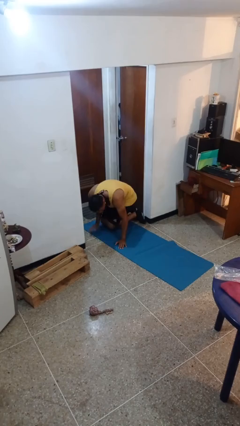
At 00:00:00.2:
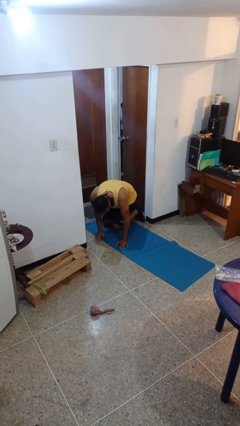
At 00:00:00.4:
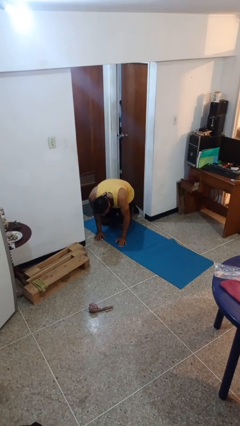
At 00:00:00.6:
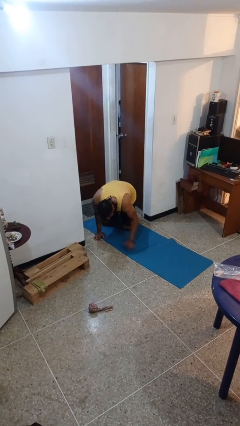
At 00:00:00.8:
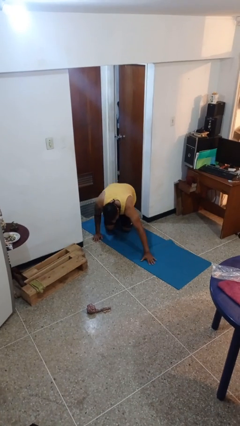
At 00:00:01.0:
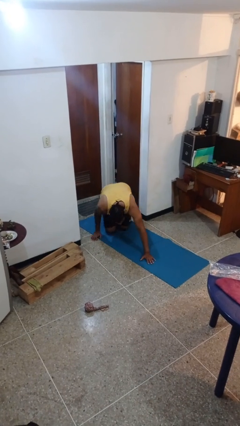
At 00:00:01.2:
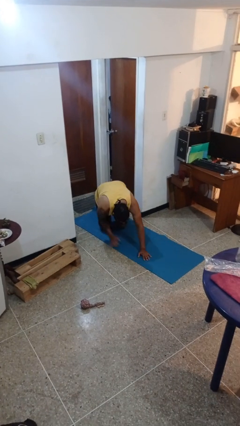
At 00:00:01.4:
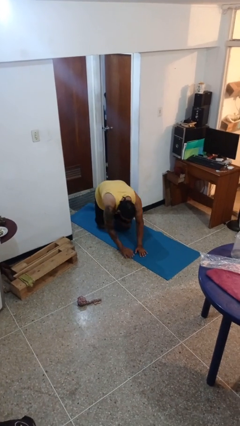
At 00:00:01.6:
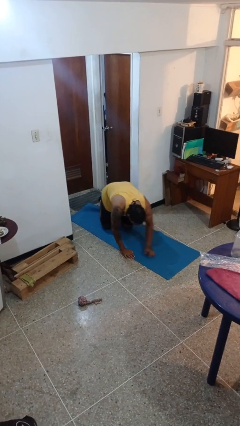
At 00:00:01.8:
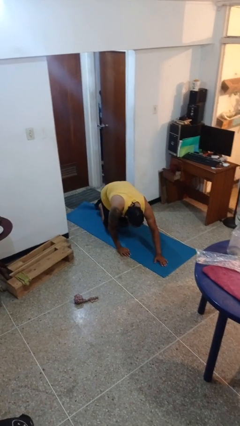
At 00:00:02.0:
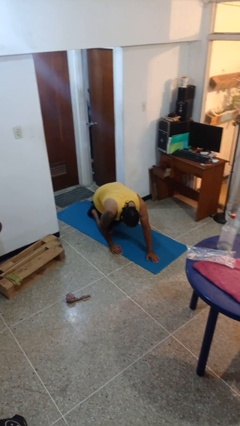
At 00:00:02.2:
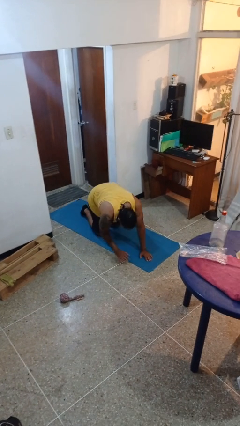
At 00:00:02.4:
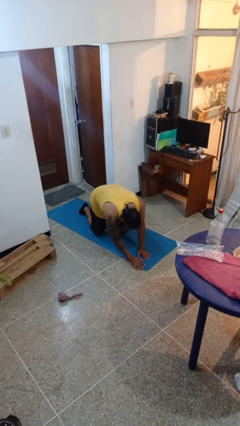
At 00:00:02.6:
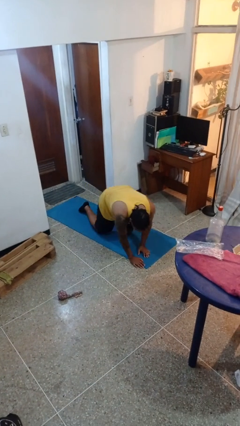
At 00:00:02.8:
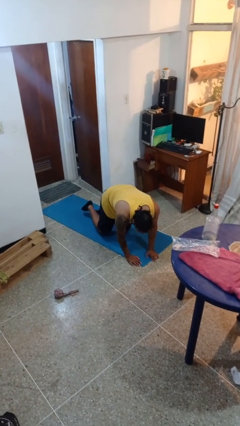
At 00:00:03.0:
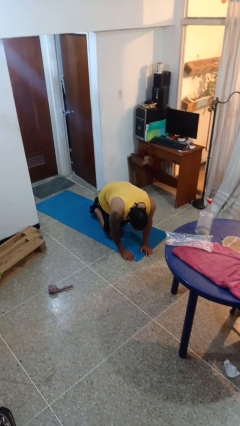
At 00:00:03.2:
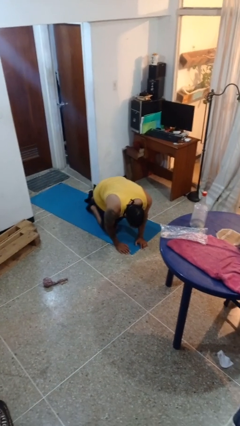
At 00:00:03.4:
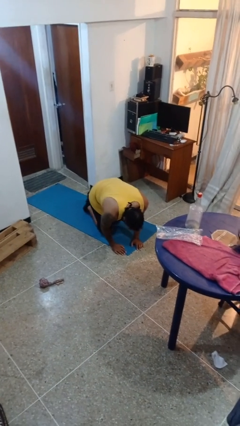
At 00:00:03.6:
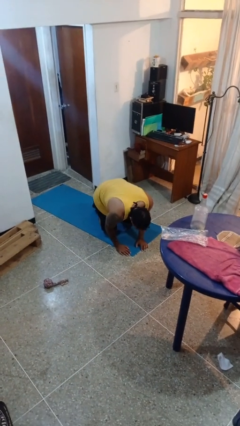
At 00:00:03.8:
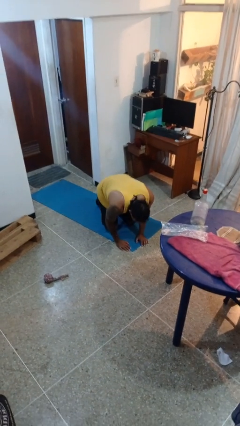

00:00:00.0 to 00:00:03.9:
person crawls

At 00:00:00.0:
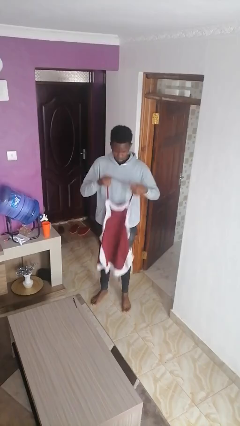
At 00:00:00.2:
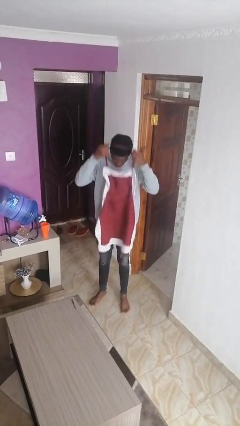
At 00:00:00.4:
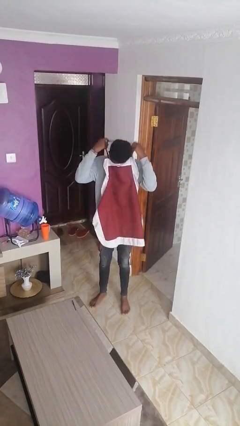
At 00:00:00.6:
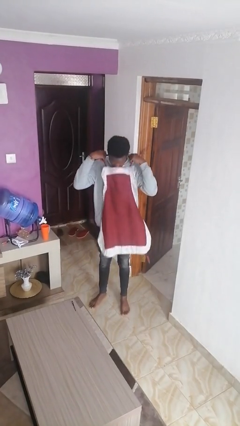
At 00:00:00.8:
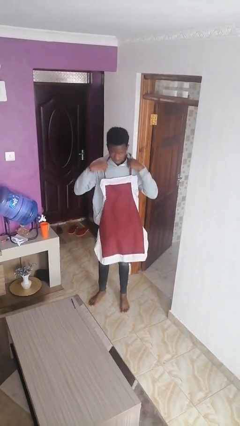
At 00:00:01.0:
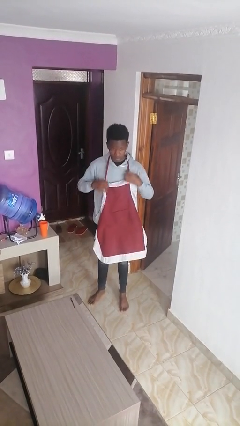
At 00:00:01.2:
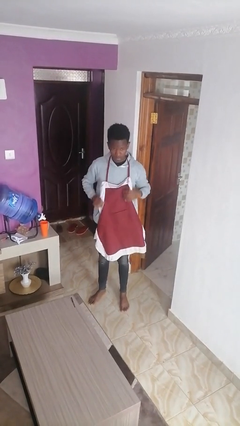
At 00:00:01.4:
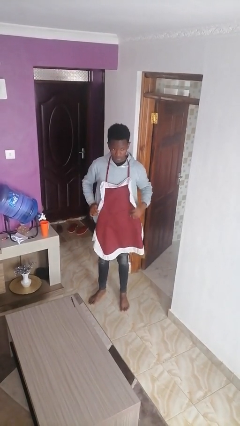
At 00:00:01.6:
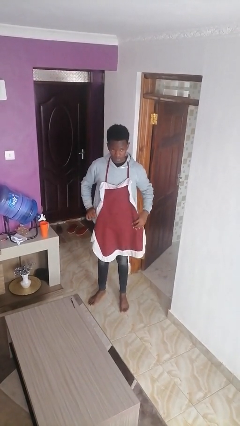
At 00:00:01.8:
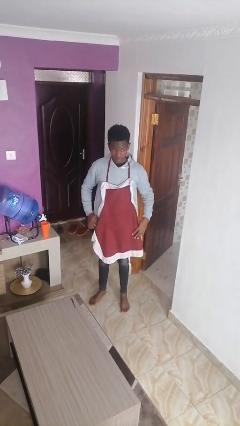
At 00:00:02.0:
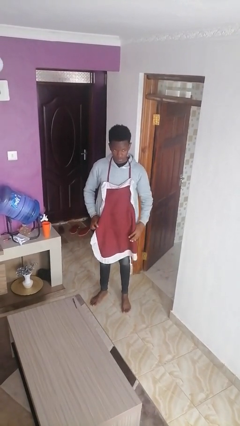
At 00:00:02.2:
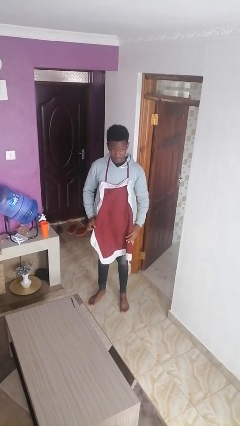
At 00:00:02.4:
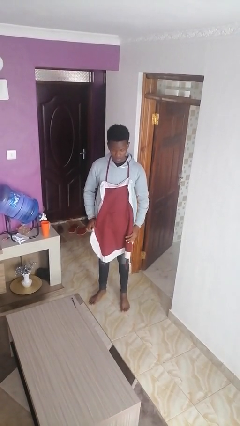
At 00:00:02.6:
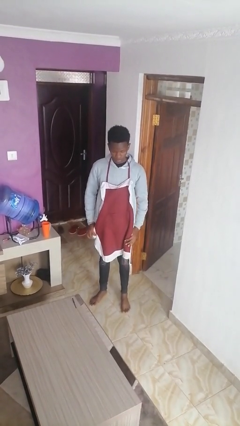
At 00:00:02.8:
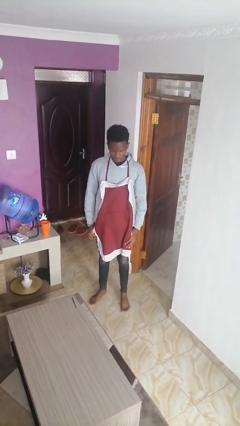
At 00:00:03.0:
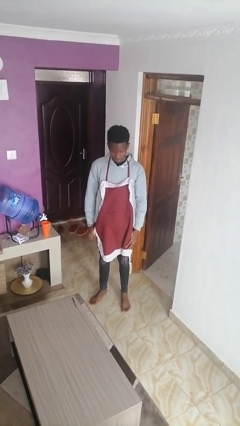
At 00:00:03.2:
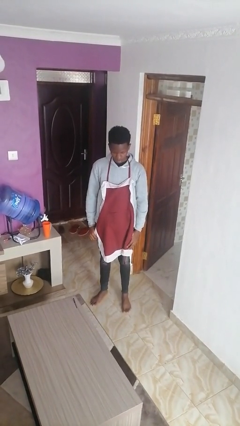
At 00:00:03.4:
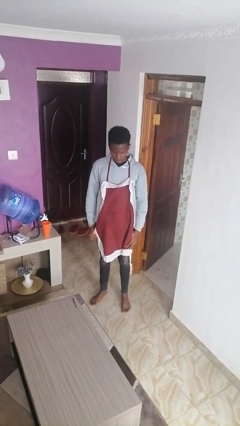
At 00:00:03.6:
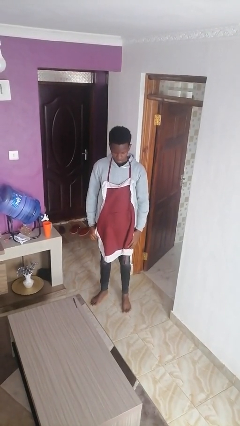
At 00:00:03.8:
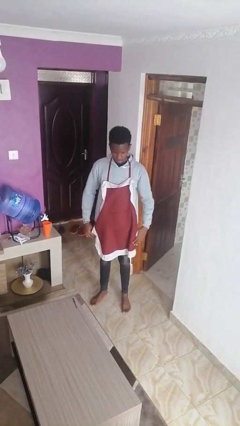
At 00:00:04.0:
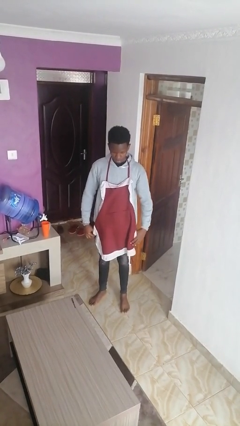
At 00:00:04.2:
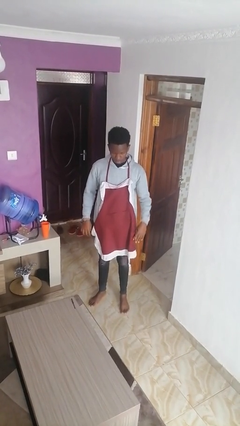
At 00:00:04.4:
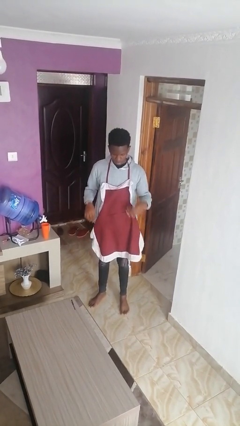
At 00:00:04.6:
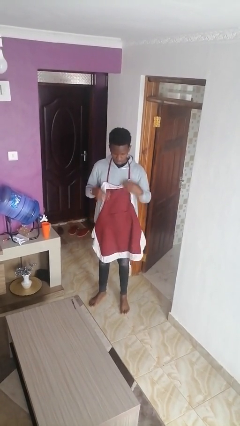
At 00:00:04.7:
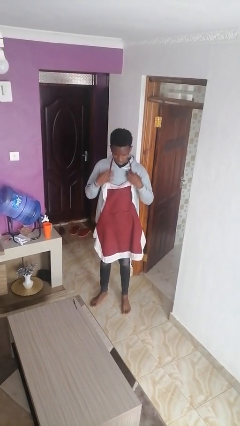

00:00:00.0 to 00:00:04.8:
person puts on apron

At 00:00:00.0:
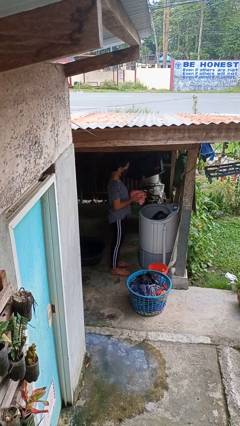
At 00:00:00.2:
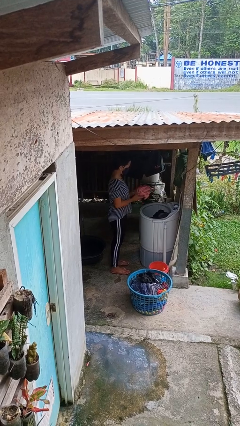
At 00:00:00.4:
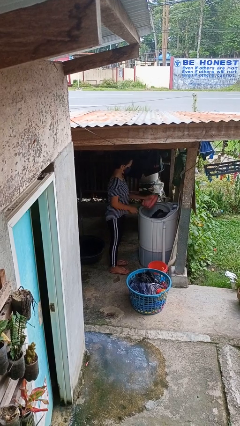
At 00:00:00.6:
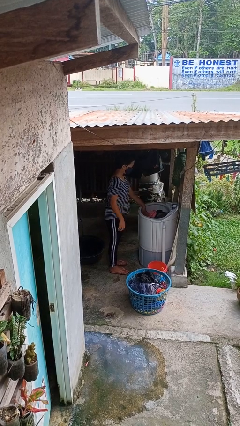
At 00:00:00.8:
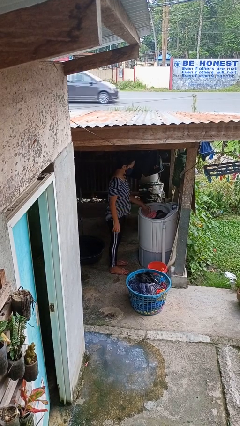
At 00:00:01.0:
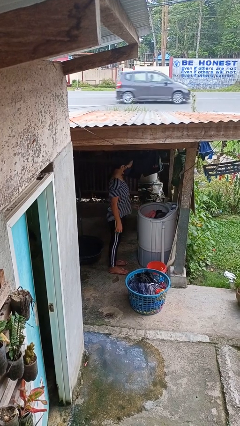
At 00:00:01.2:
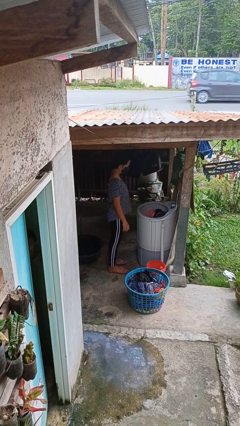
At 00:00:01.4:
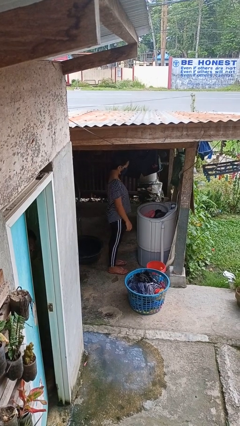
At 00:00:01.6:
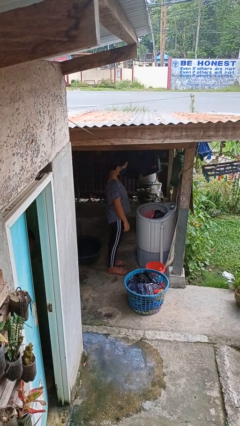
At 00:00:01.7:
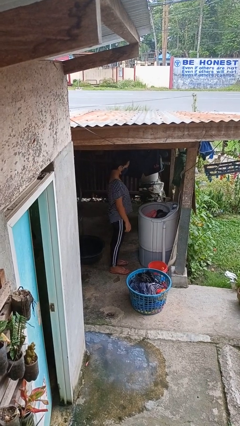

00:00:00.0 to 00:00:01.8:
person loads clotheswasher

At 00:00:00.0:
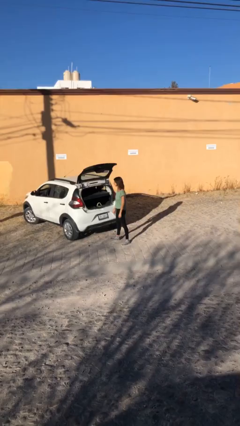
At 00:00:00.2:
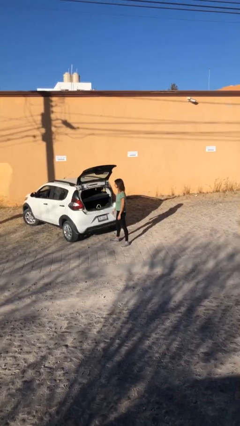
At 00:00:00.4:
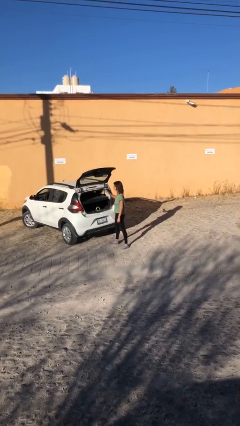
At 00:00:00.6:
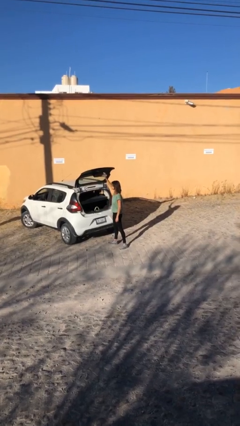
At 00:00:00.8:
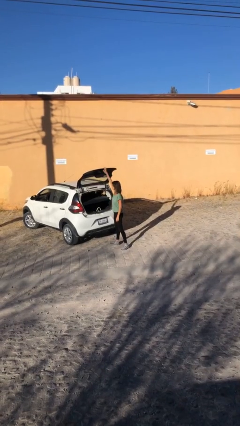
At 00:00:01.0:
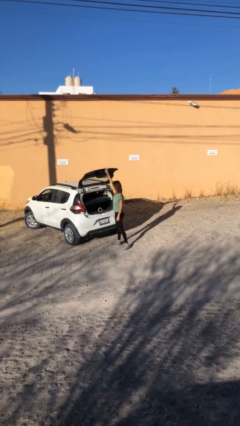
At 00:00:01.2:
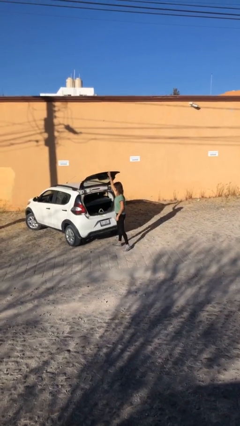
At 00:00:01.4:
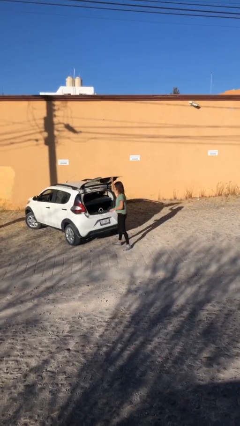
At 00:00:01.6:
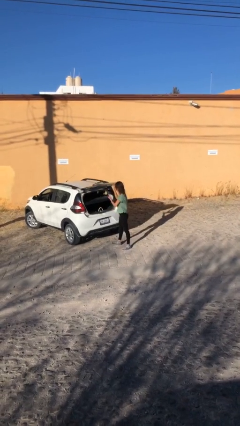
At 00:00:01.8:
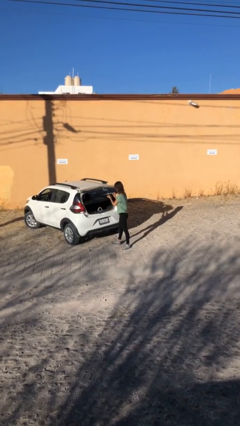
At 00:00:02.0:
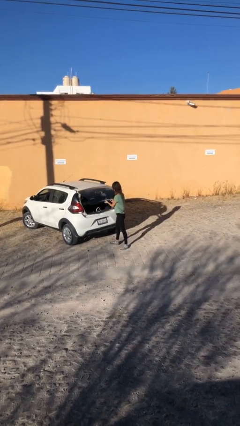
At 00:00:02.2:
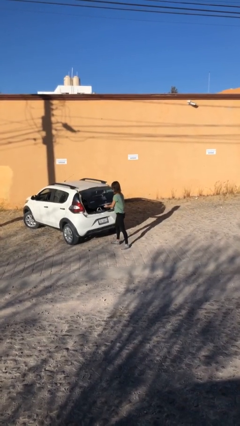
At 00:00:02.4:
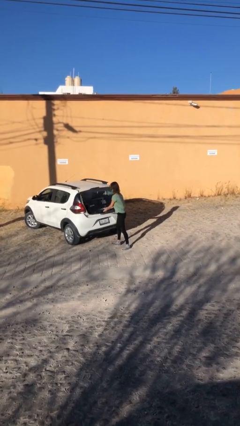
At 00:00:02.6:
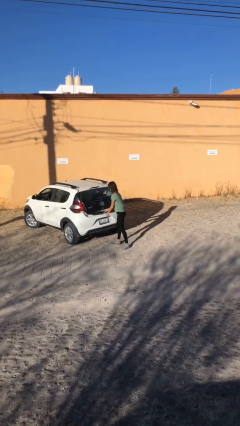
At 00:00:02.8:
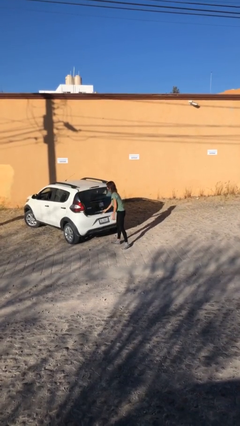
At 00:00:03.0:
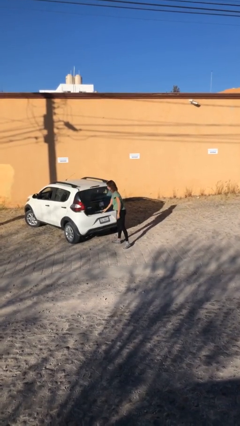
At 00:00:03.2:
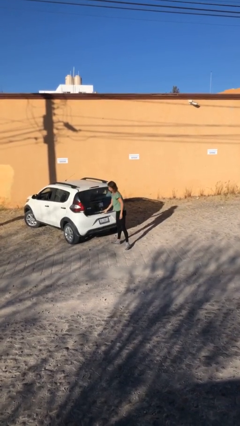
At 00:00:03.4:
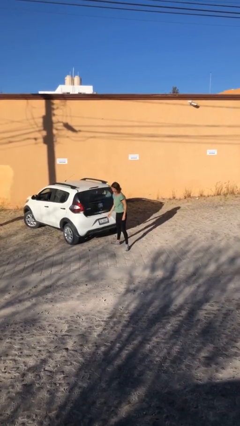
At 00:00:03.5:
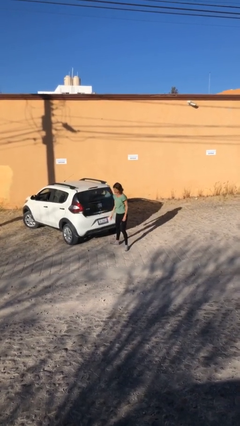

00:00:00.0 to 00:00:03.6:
person closes car trunk

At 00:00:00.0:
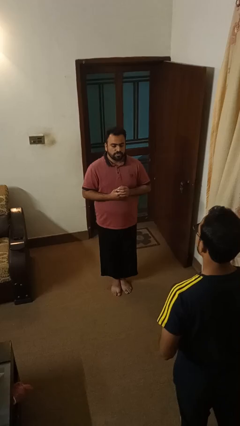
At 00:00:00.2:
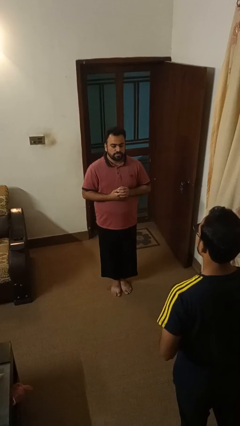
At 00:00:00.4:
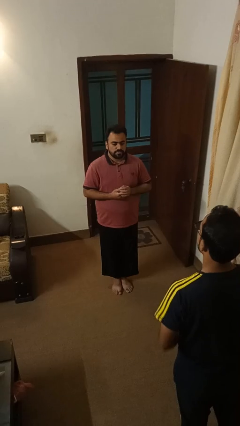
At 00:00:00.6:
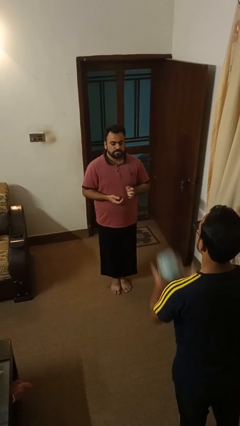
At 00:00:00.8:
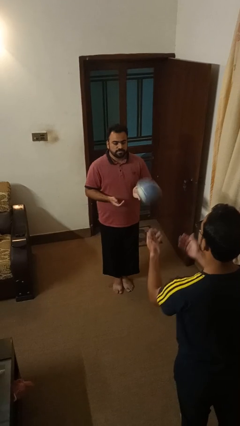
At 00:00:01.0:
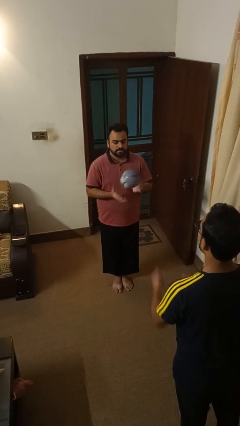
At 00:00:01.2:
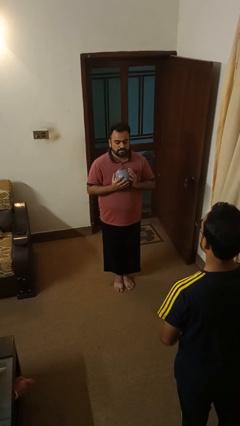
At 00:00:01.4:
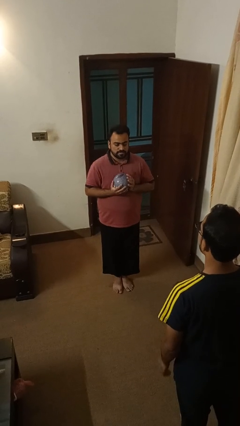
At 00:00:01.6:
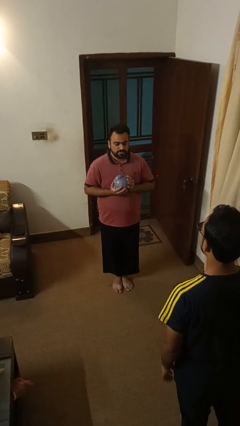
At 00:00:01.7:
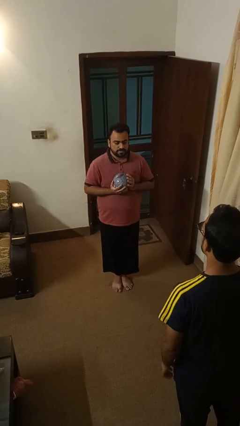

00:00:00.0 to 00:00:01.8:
person catches object from person

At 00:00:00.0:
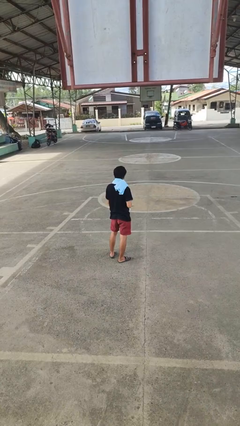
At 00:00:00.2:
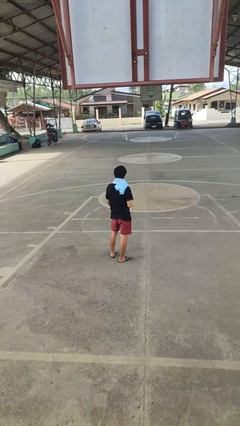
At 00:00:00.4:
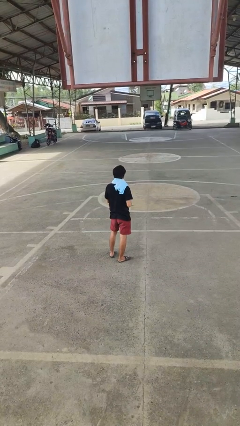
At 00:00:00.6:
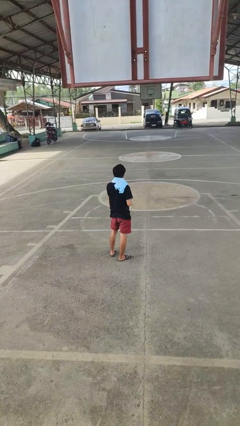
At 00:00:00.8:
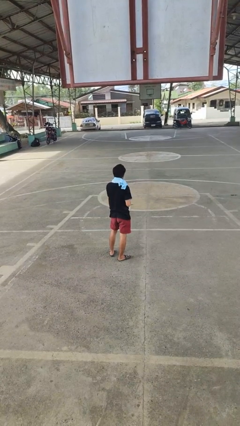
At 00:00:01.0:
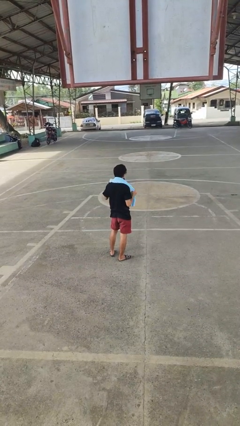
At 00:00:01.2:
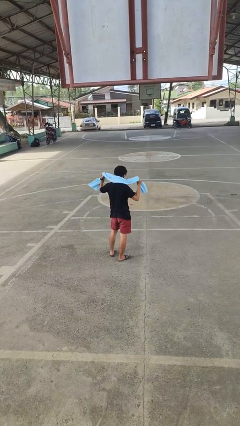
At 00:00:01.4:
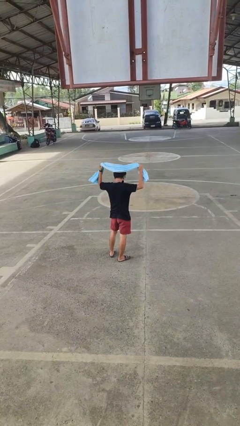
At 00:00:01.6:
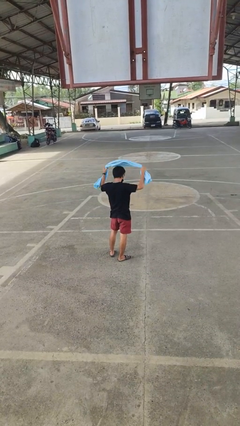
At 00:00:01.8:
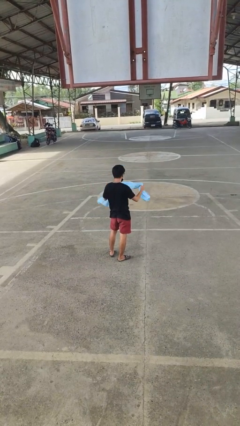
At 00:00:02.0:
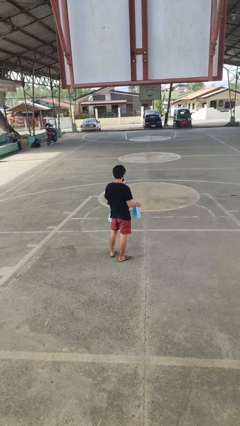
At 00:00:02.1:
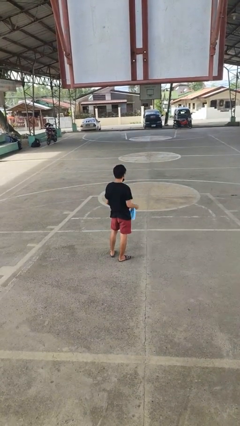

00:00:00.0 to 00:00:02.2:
person takes off scarf
